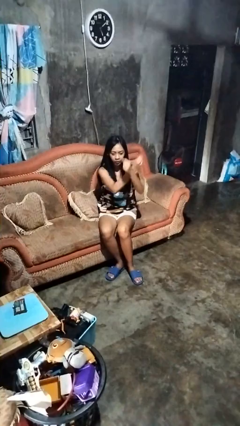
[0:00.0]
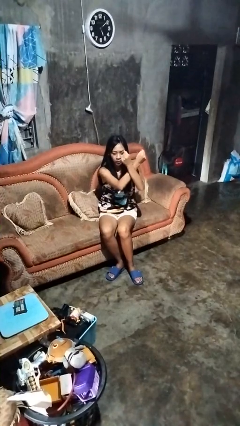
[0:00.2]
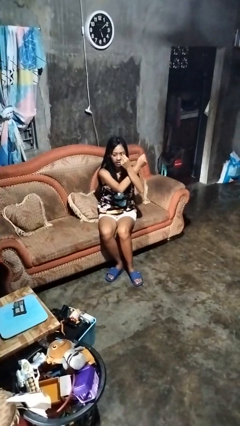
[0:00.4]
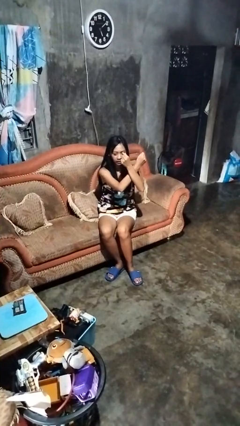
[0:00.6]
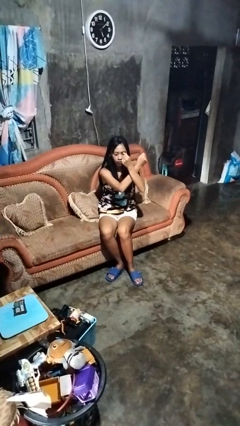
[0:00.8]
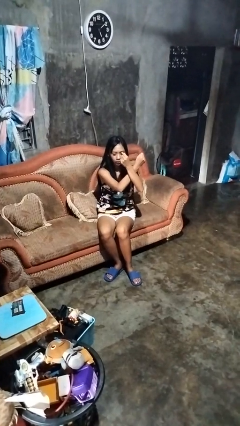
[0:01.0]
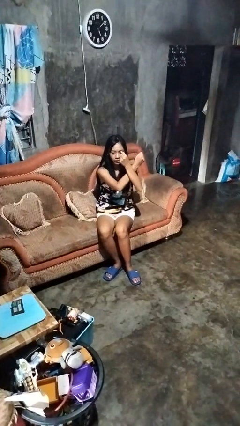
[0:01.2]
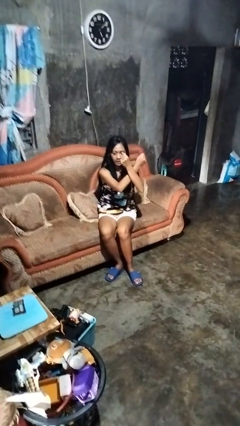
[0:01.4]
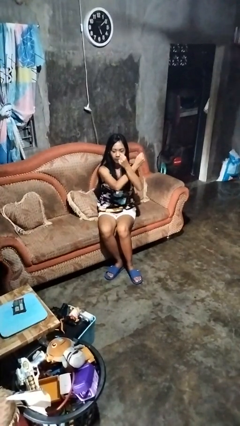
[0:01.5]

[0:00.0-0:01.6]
person gestures arms x

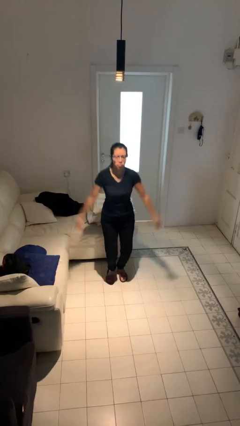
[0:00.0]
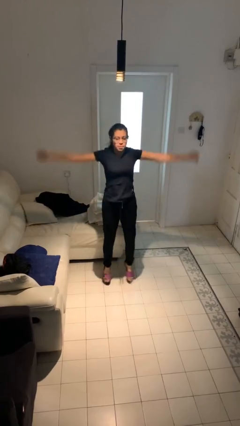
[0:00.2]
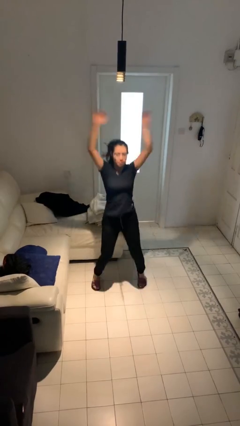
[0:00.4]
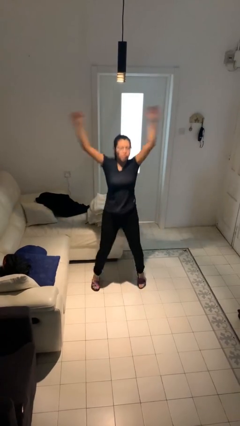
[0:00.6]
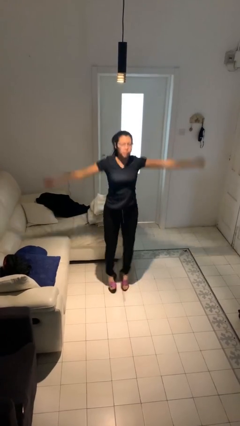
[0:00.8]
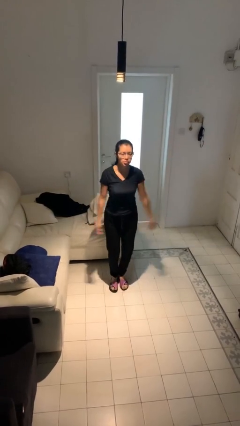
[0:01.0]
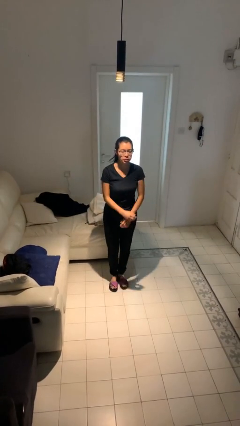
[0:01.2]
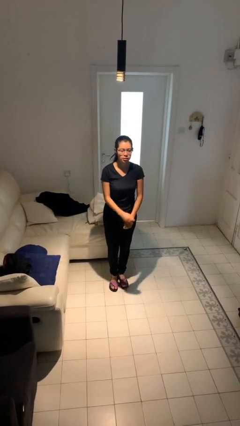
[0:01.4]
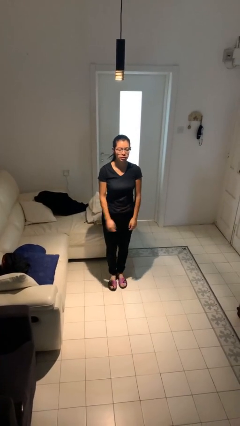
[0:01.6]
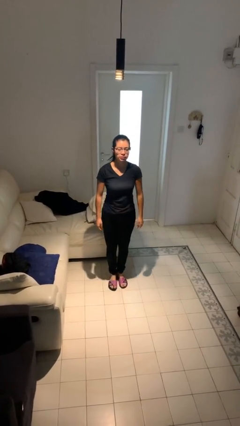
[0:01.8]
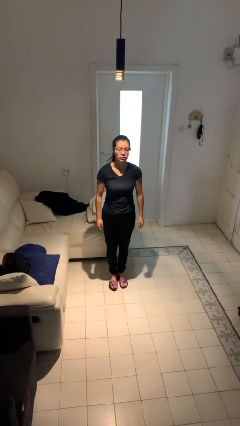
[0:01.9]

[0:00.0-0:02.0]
person jumps

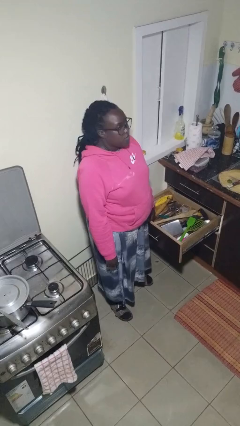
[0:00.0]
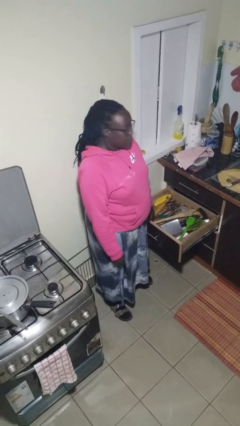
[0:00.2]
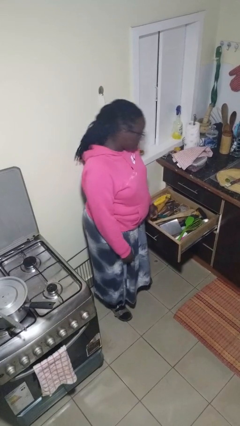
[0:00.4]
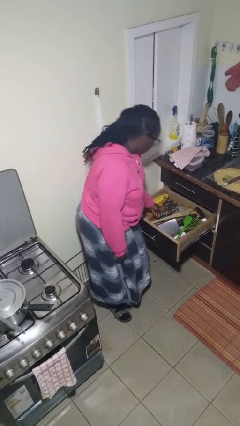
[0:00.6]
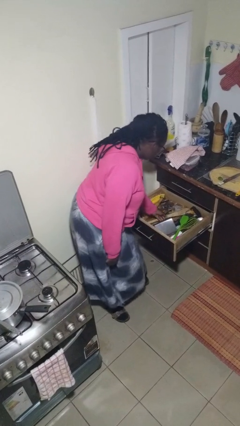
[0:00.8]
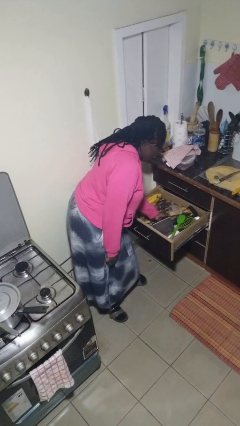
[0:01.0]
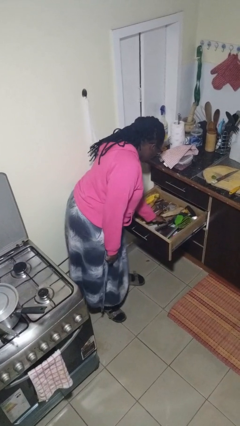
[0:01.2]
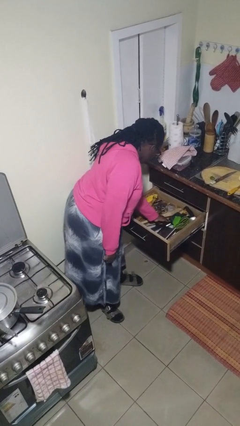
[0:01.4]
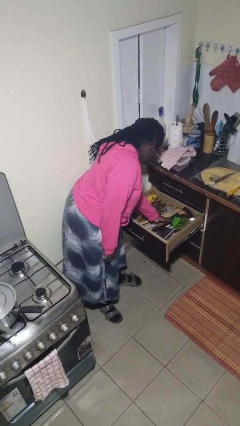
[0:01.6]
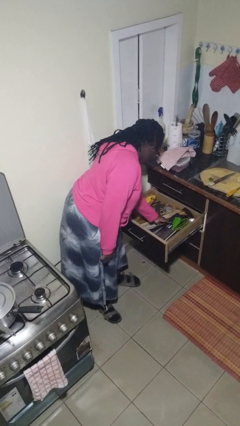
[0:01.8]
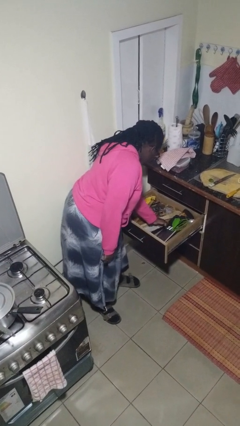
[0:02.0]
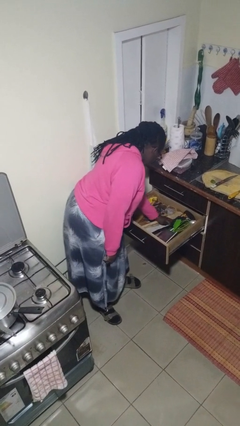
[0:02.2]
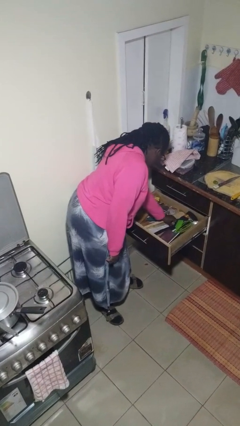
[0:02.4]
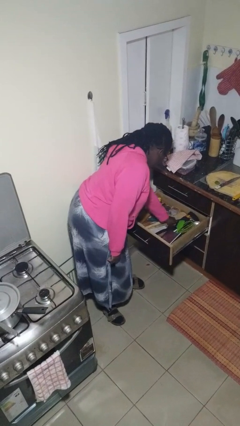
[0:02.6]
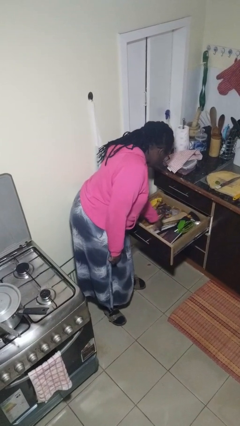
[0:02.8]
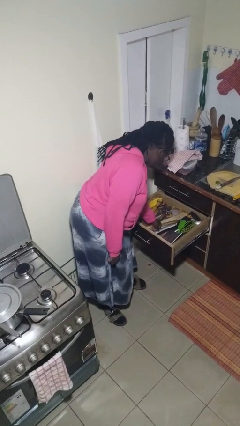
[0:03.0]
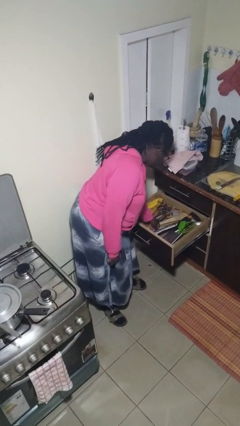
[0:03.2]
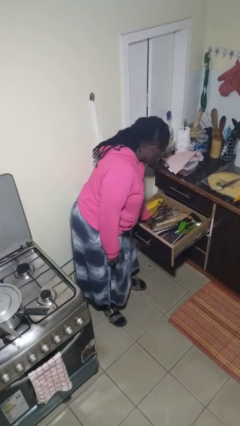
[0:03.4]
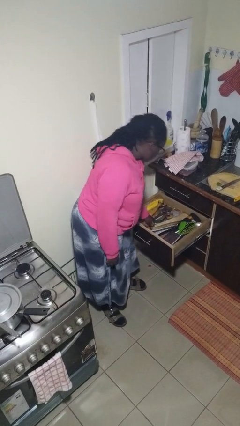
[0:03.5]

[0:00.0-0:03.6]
person searches in kitchen drawer

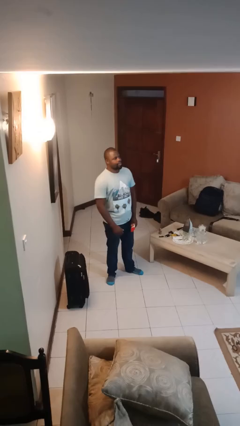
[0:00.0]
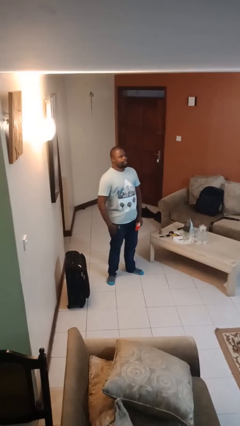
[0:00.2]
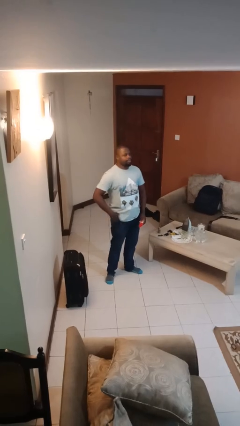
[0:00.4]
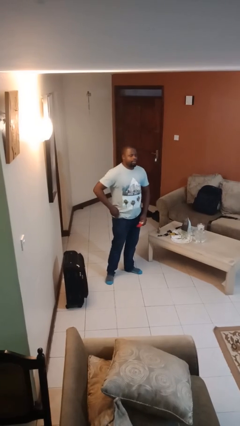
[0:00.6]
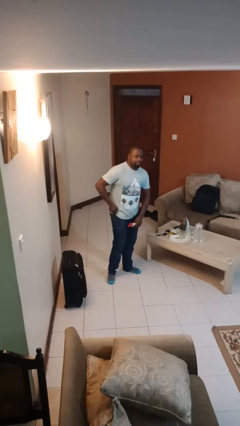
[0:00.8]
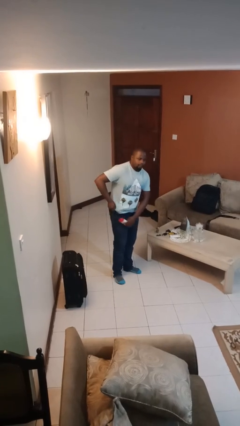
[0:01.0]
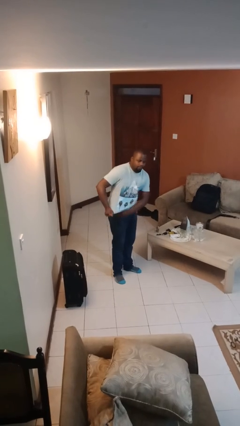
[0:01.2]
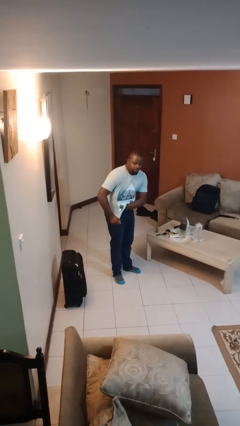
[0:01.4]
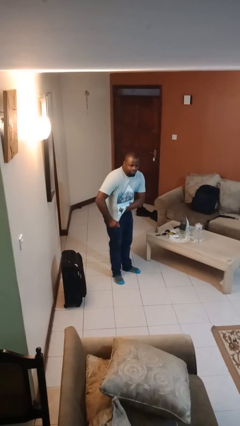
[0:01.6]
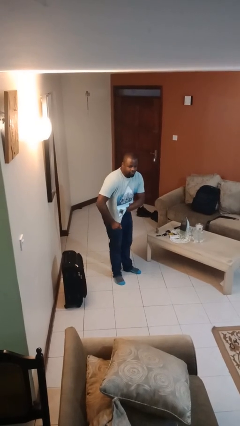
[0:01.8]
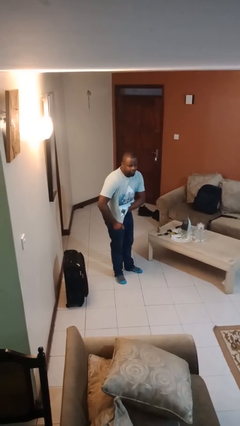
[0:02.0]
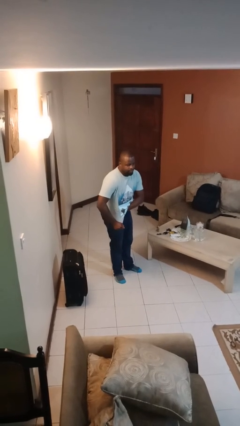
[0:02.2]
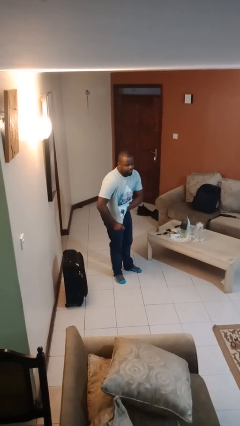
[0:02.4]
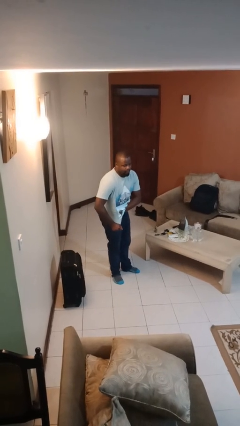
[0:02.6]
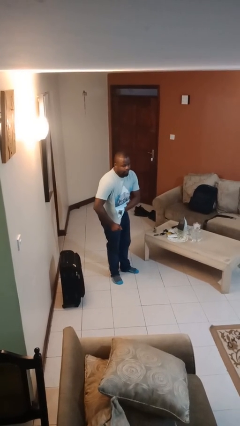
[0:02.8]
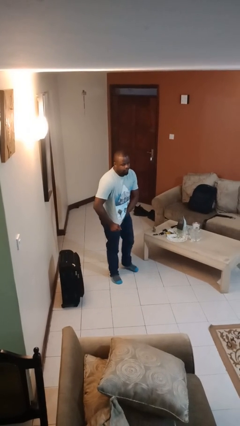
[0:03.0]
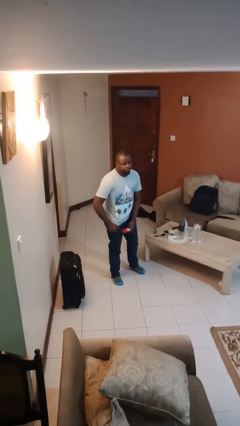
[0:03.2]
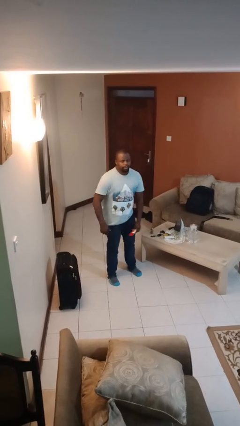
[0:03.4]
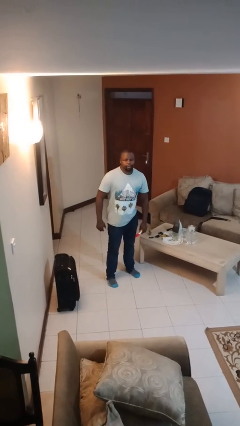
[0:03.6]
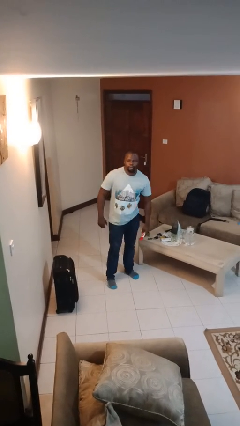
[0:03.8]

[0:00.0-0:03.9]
person applies deodorant

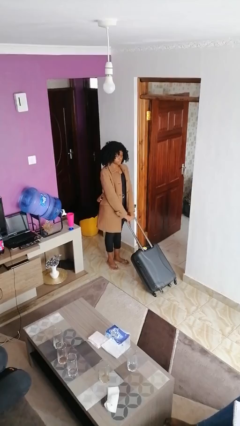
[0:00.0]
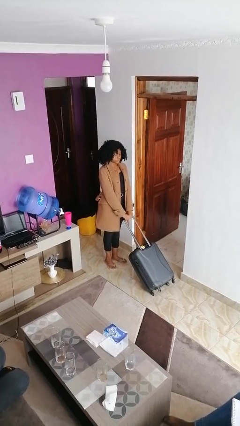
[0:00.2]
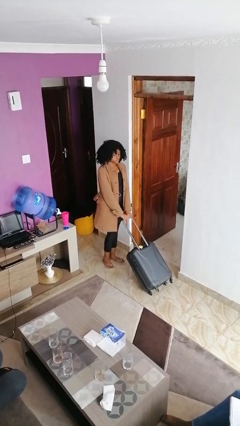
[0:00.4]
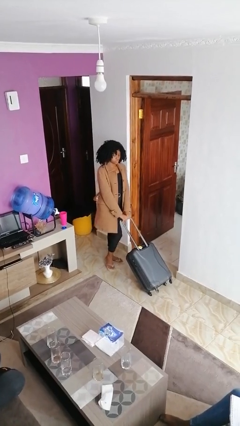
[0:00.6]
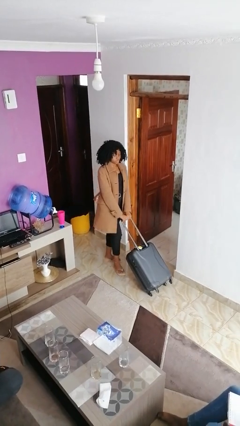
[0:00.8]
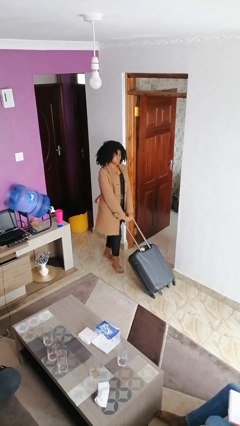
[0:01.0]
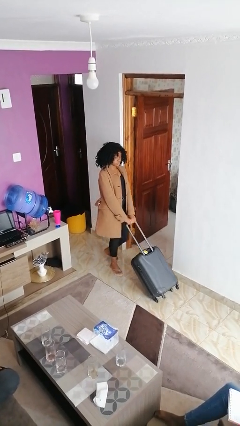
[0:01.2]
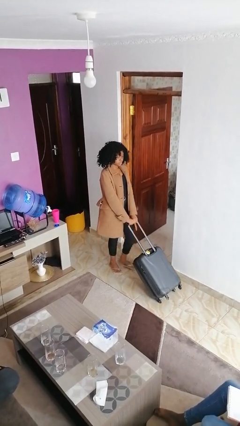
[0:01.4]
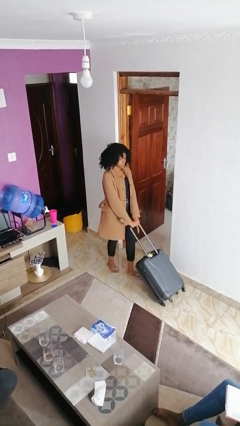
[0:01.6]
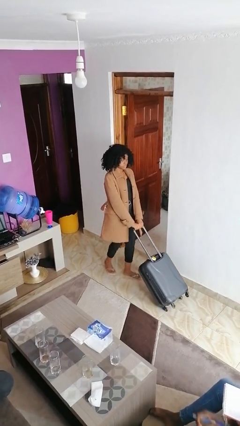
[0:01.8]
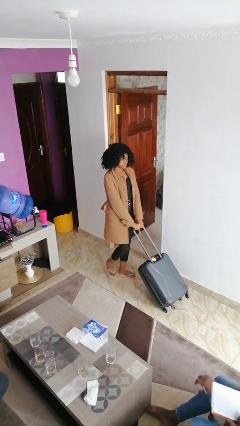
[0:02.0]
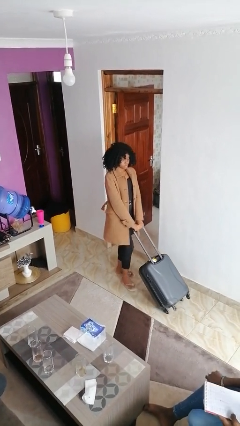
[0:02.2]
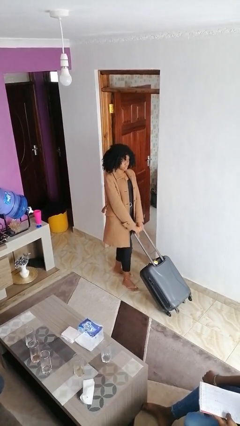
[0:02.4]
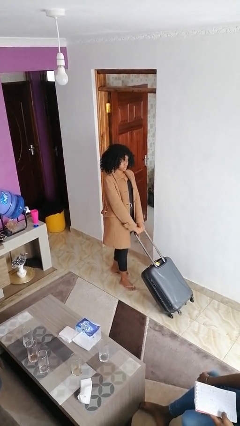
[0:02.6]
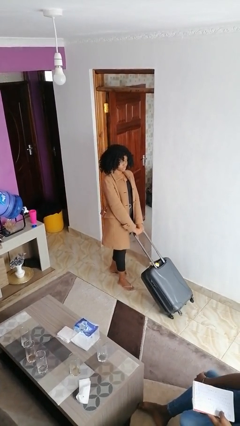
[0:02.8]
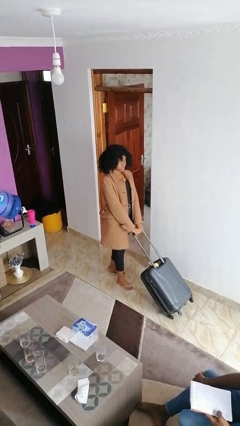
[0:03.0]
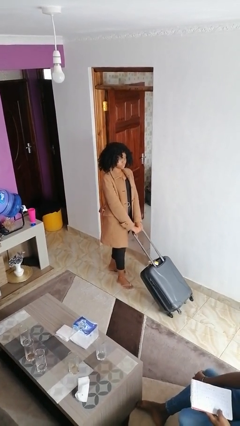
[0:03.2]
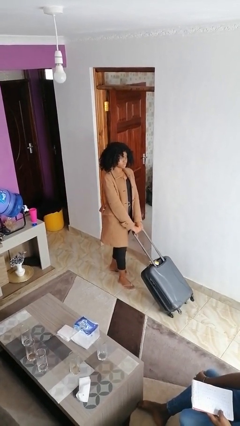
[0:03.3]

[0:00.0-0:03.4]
person pushes wheeled cart

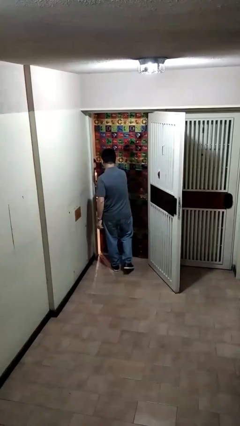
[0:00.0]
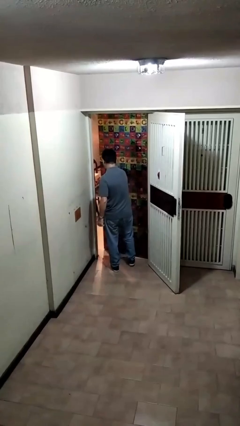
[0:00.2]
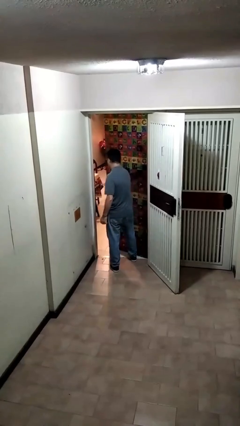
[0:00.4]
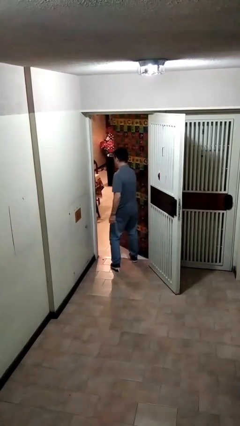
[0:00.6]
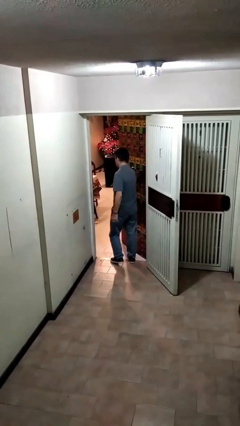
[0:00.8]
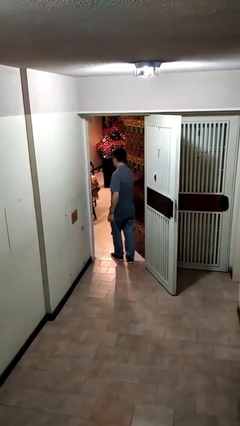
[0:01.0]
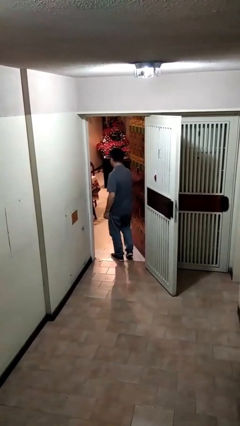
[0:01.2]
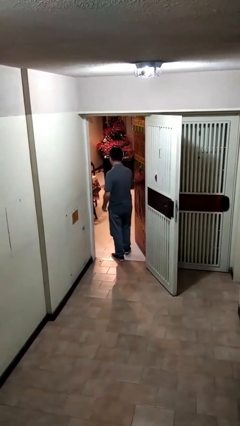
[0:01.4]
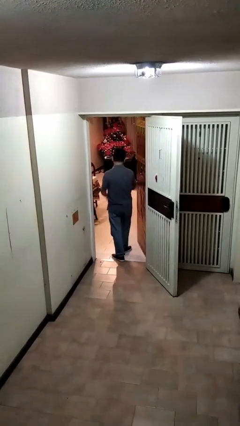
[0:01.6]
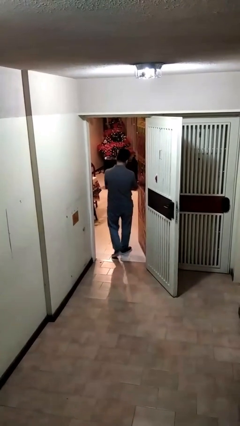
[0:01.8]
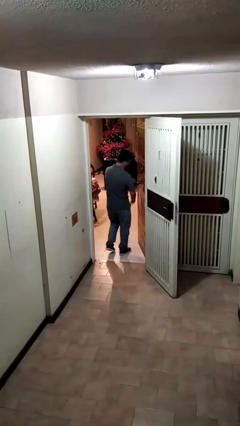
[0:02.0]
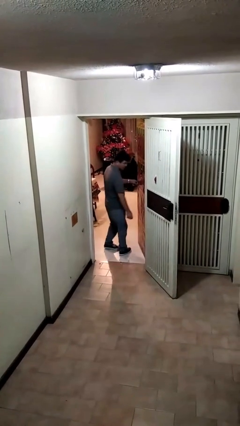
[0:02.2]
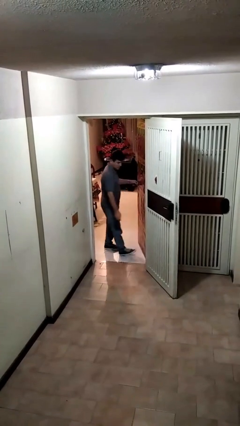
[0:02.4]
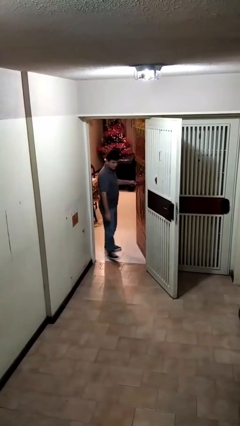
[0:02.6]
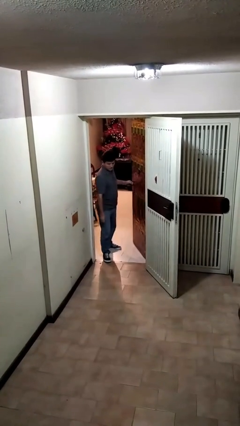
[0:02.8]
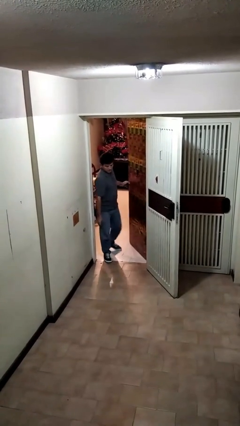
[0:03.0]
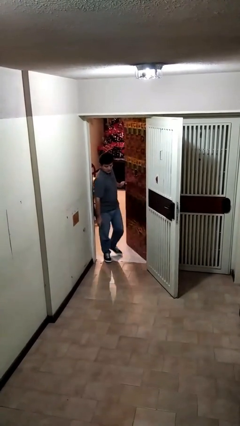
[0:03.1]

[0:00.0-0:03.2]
person opens facility door
